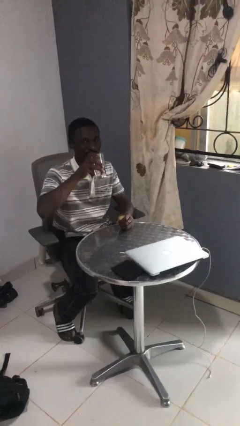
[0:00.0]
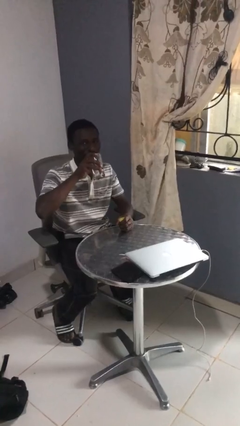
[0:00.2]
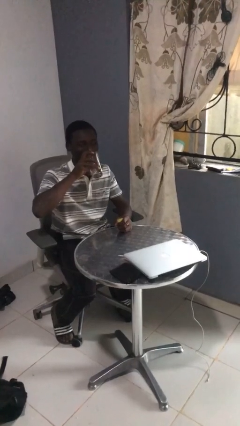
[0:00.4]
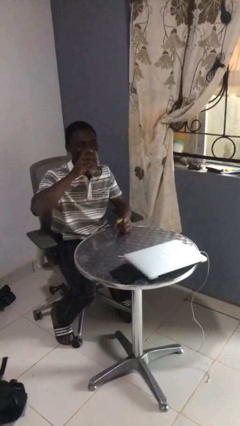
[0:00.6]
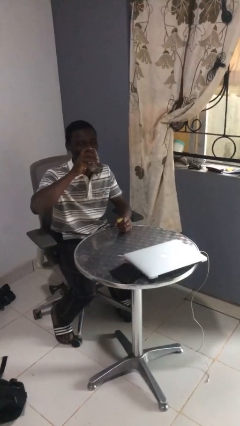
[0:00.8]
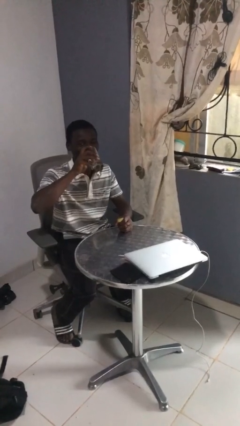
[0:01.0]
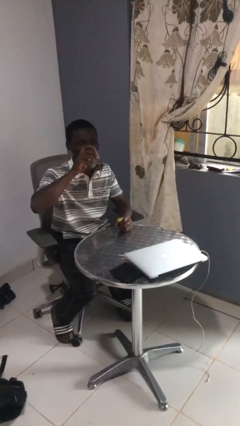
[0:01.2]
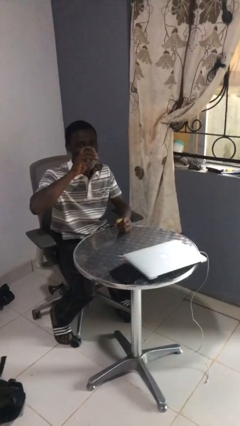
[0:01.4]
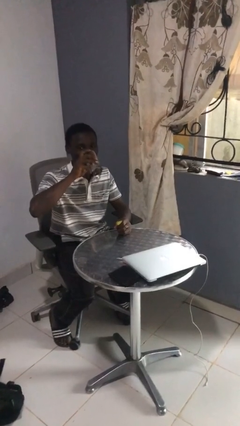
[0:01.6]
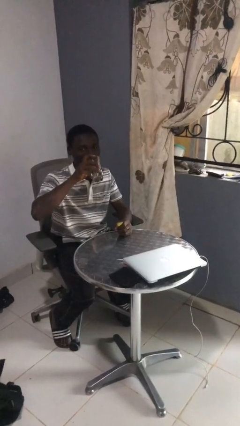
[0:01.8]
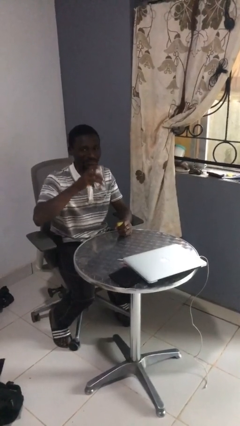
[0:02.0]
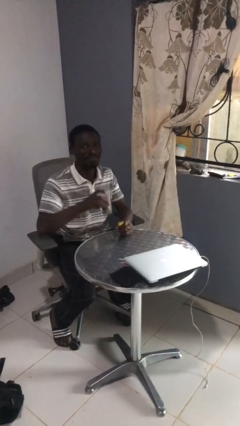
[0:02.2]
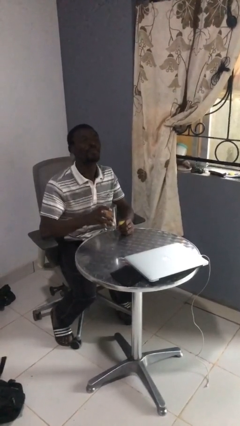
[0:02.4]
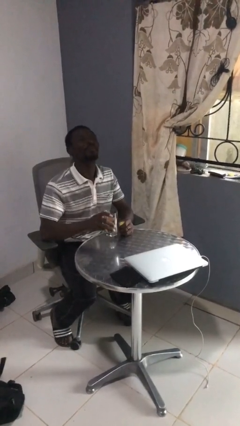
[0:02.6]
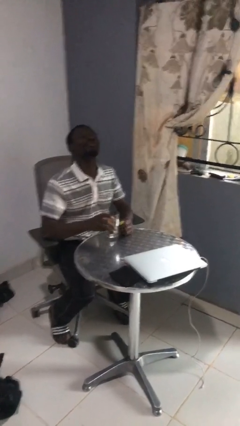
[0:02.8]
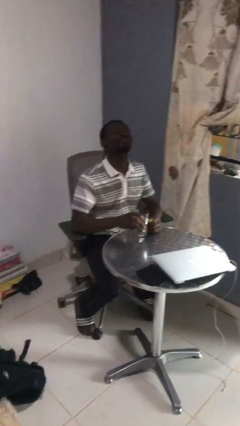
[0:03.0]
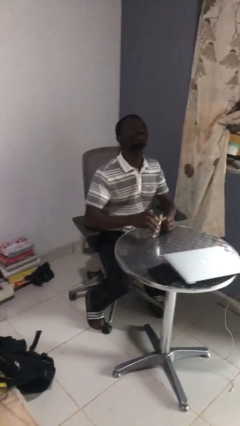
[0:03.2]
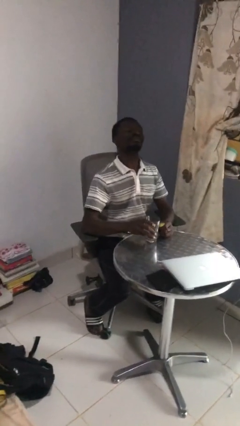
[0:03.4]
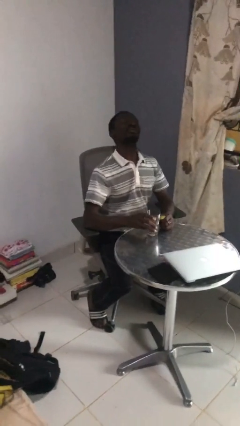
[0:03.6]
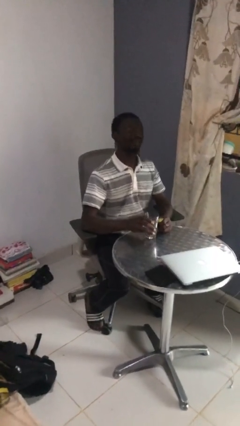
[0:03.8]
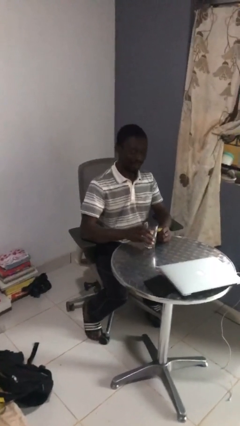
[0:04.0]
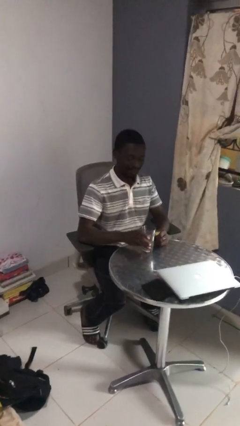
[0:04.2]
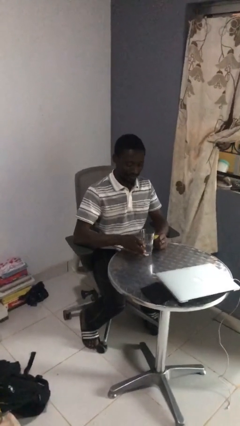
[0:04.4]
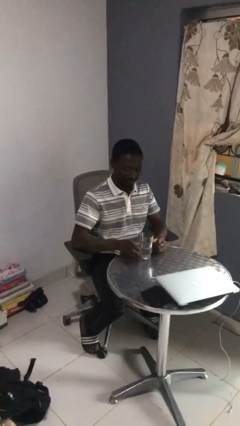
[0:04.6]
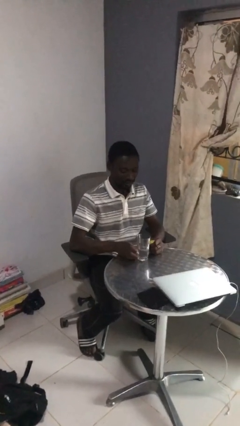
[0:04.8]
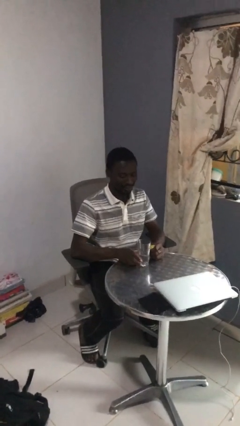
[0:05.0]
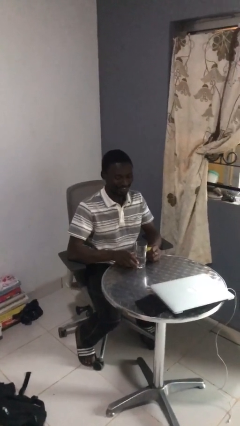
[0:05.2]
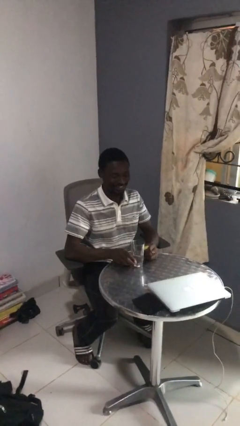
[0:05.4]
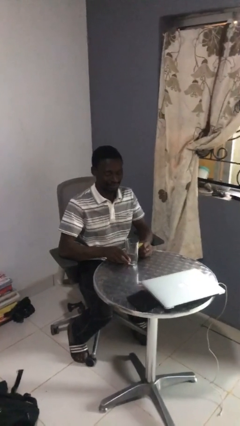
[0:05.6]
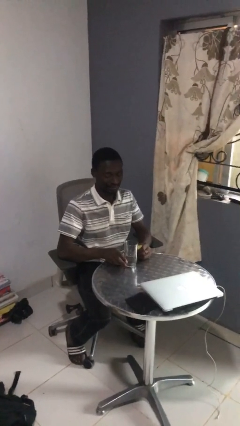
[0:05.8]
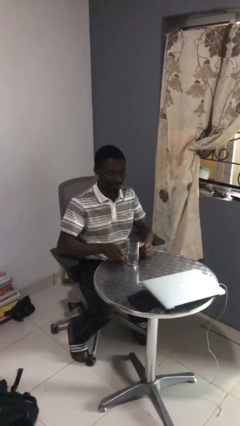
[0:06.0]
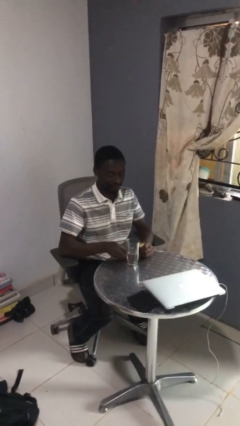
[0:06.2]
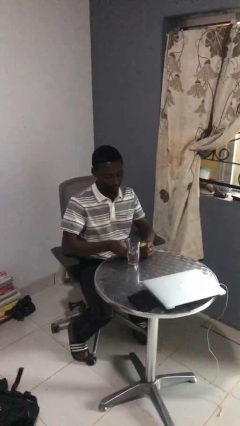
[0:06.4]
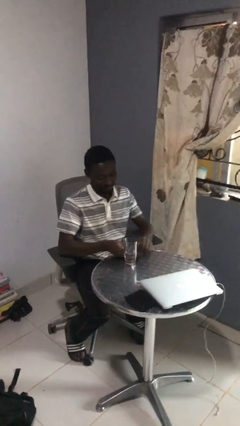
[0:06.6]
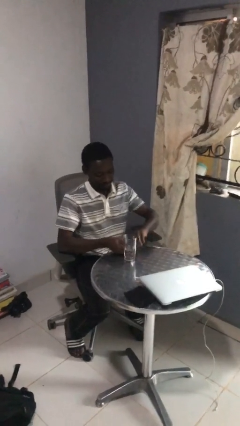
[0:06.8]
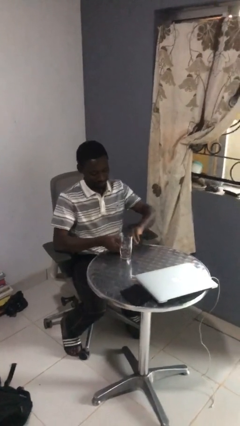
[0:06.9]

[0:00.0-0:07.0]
person drinks from cup

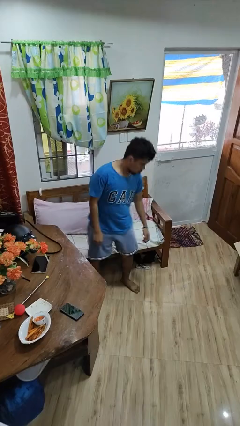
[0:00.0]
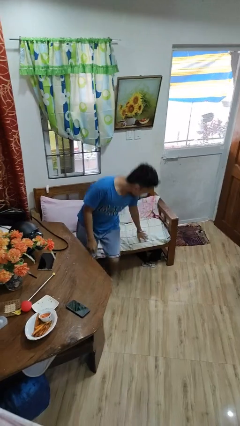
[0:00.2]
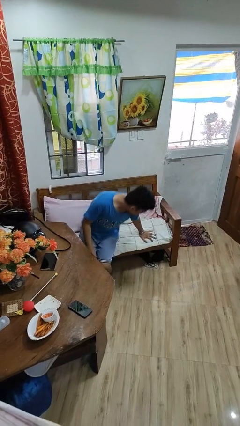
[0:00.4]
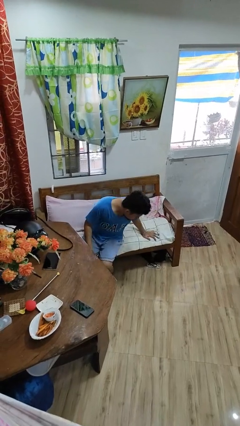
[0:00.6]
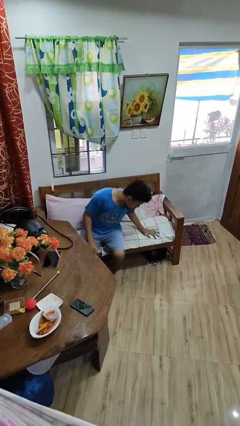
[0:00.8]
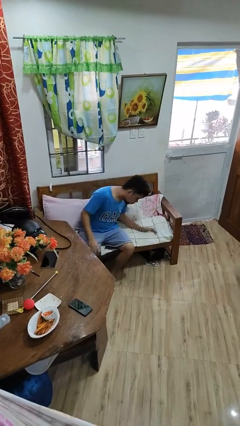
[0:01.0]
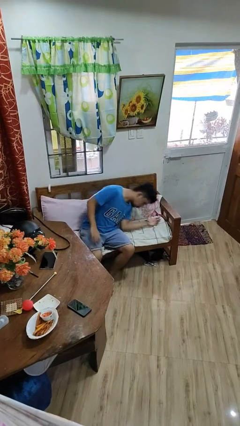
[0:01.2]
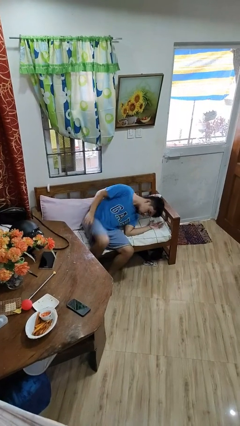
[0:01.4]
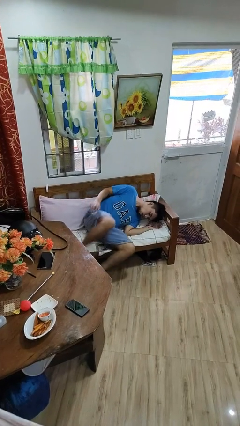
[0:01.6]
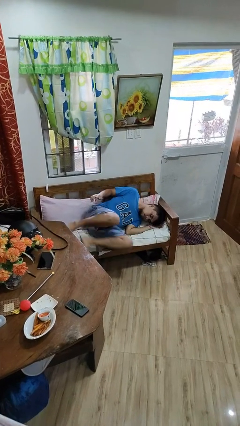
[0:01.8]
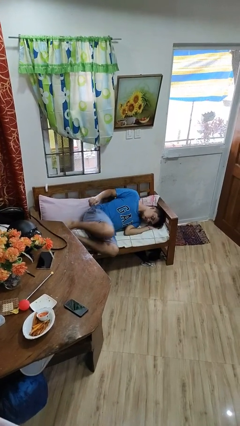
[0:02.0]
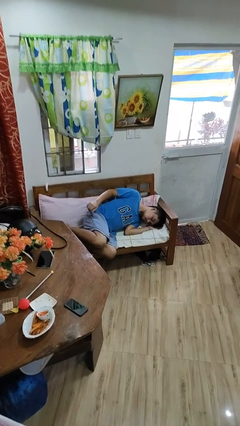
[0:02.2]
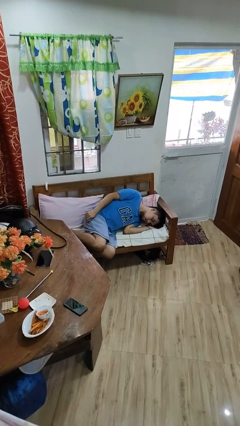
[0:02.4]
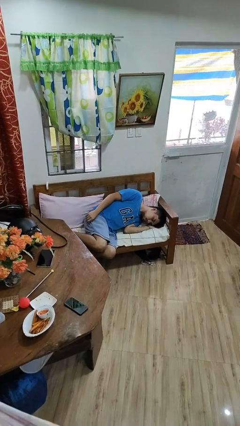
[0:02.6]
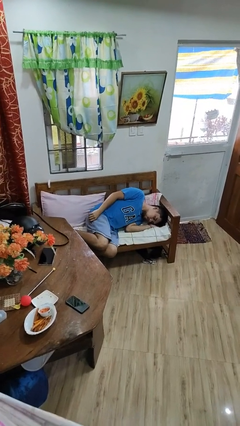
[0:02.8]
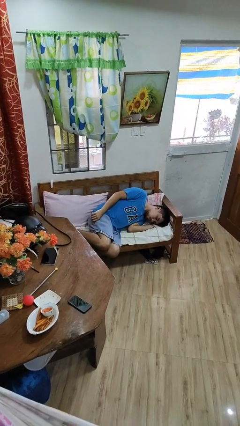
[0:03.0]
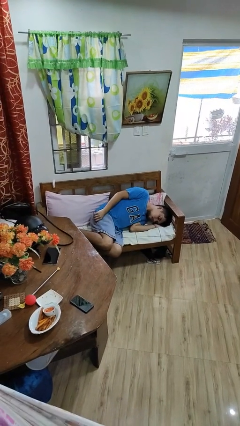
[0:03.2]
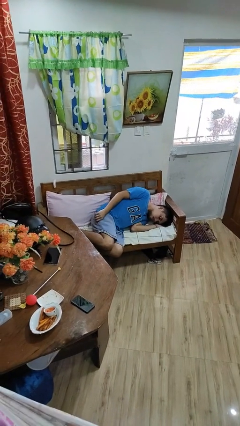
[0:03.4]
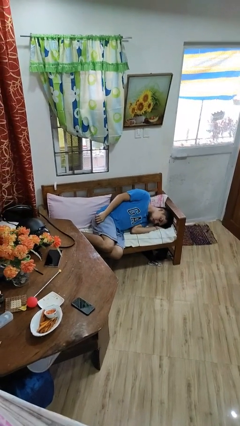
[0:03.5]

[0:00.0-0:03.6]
person lies down on couch

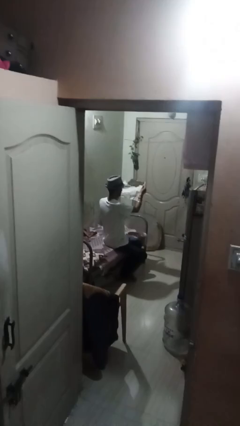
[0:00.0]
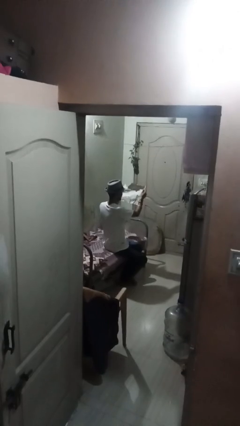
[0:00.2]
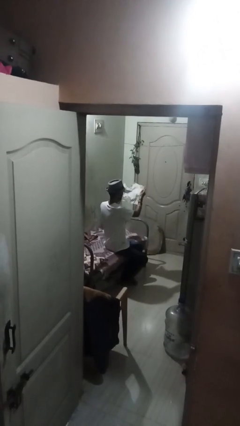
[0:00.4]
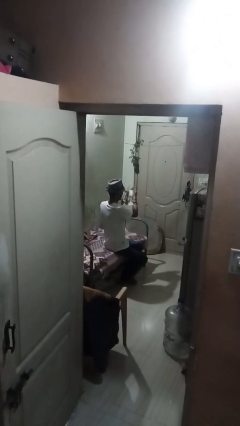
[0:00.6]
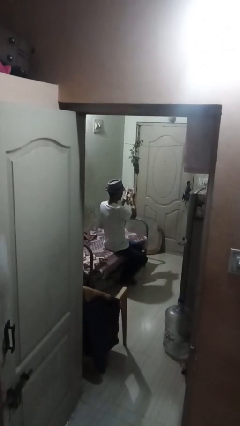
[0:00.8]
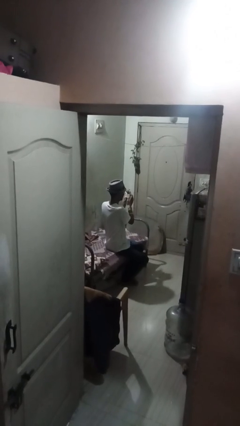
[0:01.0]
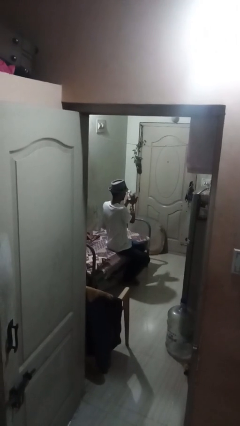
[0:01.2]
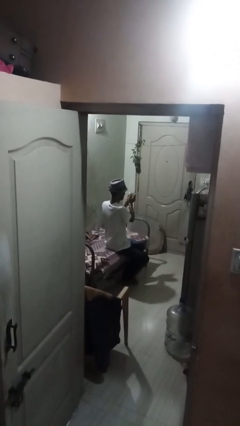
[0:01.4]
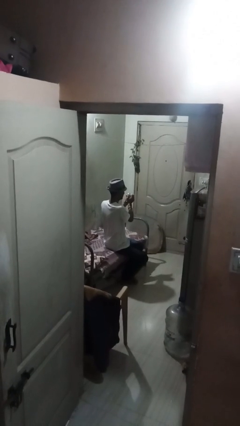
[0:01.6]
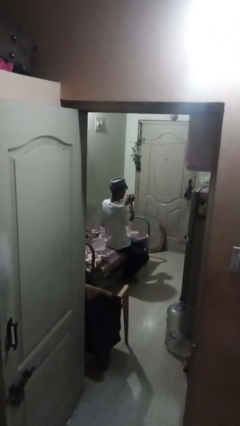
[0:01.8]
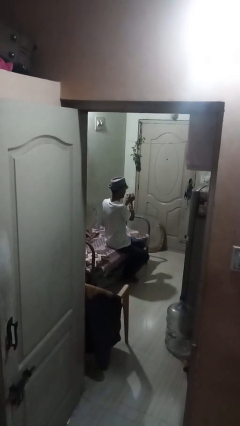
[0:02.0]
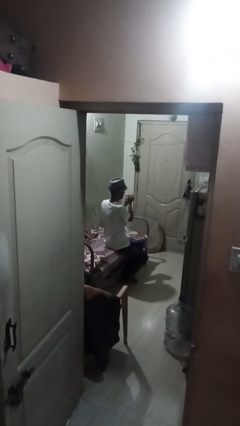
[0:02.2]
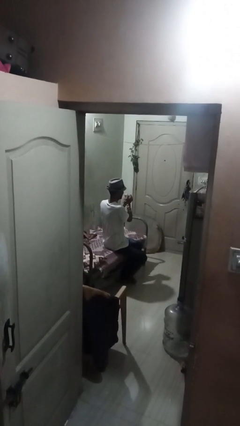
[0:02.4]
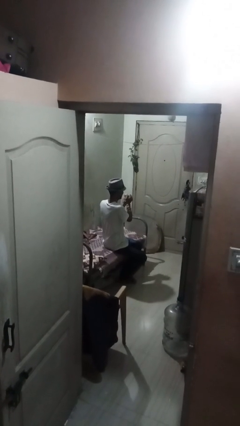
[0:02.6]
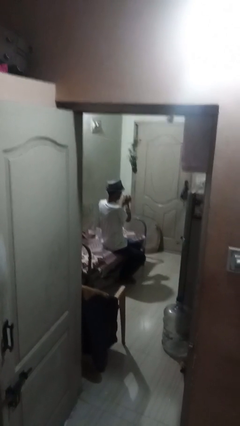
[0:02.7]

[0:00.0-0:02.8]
person crumples paper

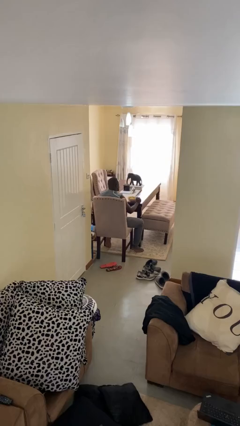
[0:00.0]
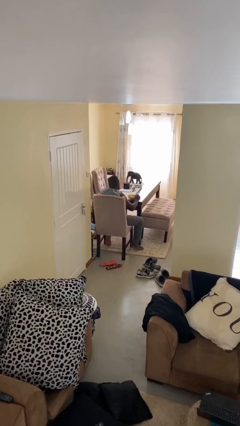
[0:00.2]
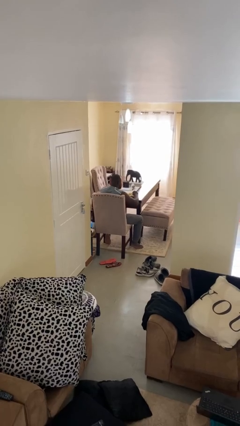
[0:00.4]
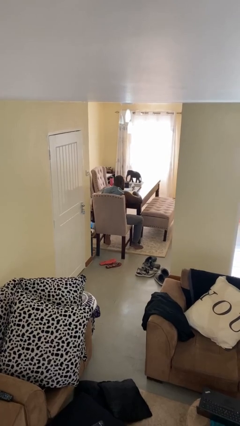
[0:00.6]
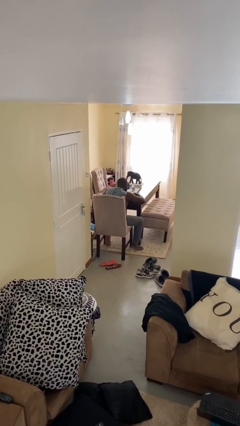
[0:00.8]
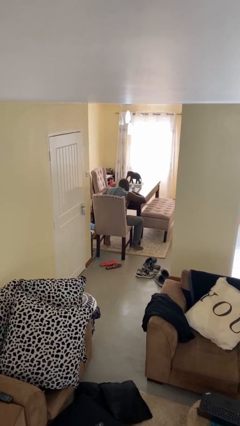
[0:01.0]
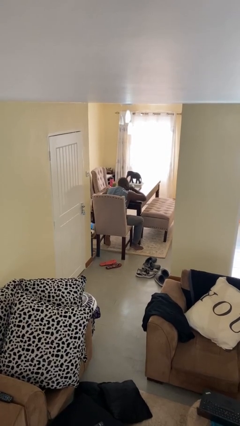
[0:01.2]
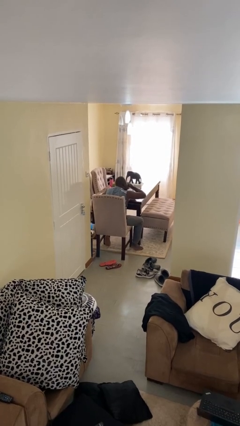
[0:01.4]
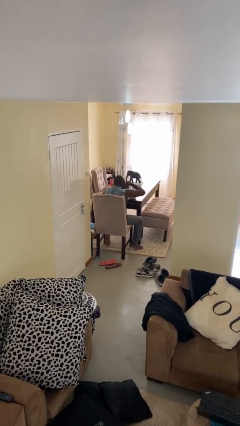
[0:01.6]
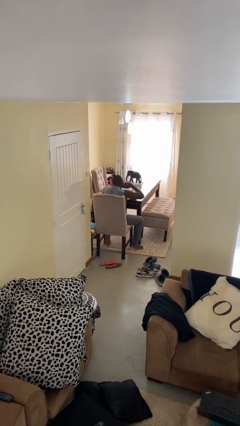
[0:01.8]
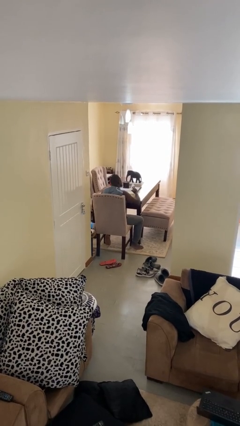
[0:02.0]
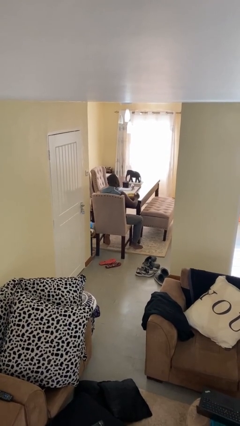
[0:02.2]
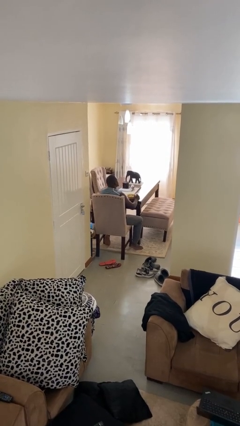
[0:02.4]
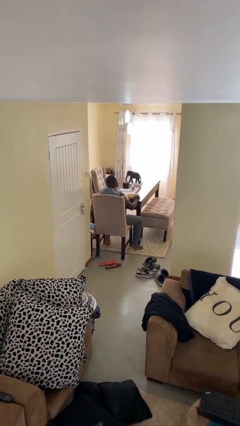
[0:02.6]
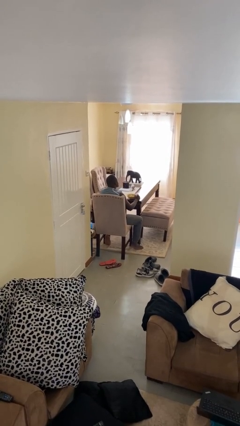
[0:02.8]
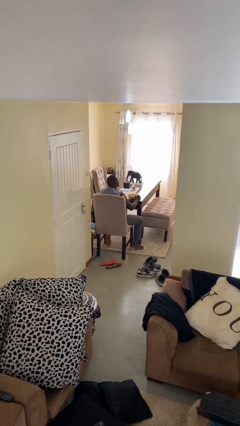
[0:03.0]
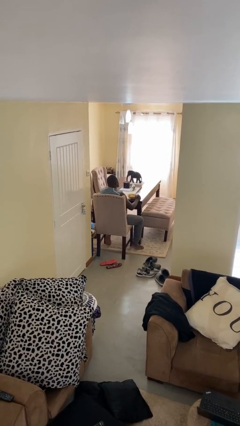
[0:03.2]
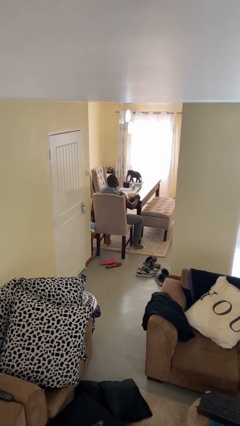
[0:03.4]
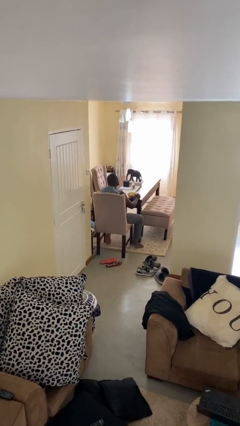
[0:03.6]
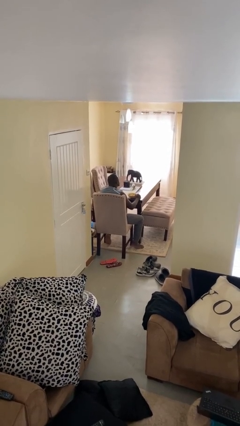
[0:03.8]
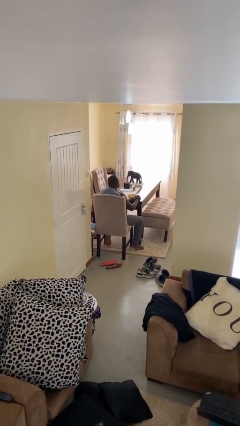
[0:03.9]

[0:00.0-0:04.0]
person eats with hands

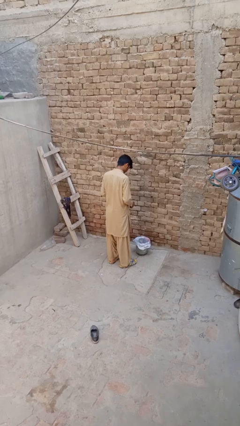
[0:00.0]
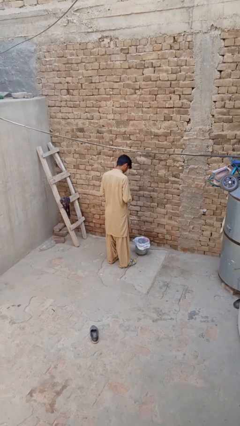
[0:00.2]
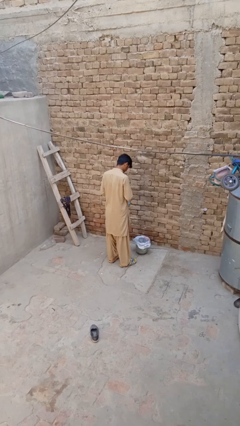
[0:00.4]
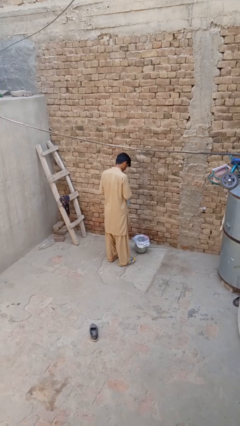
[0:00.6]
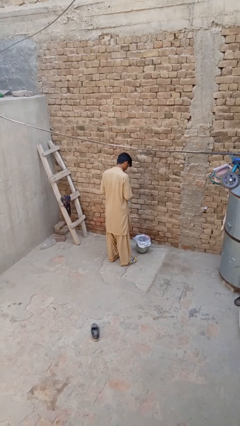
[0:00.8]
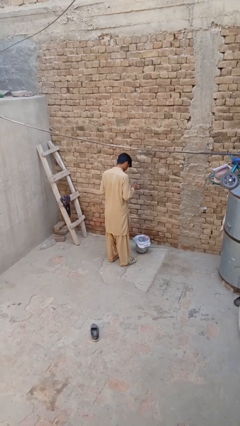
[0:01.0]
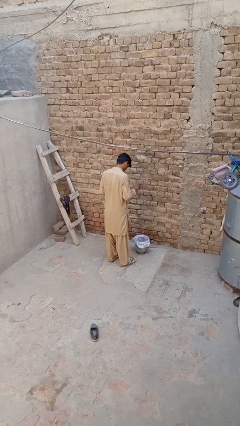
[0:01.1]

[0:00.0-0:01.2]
person discards trash
